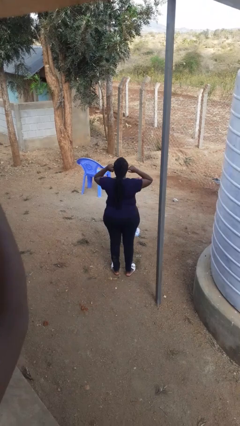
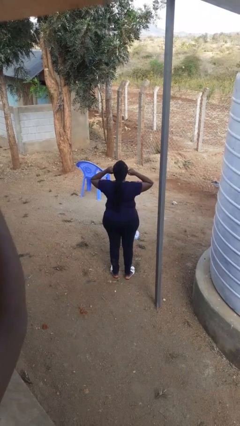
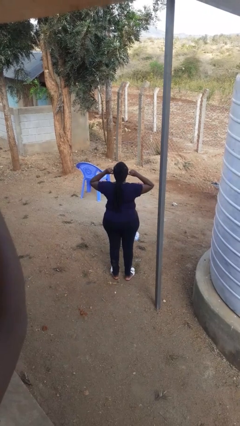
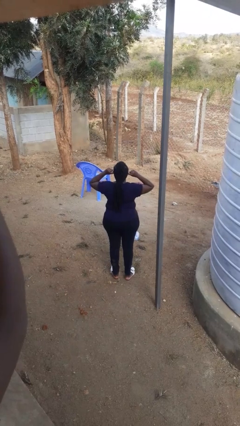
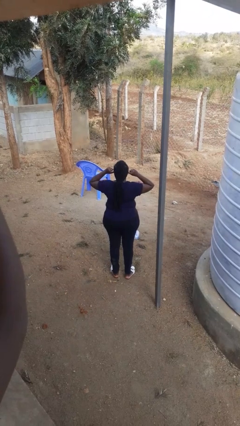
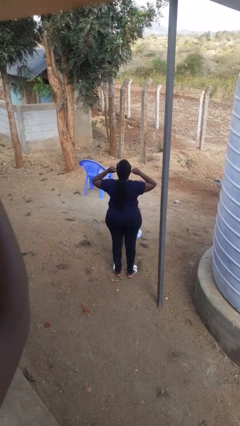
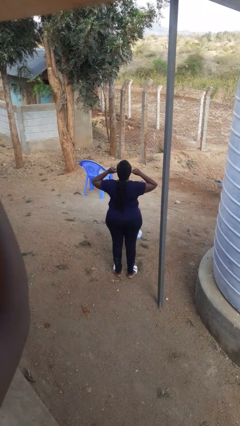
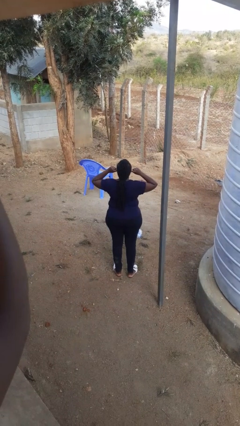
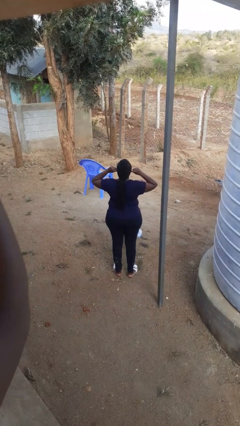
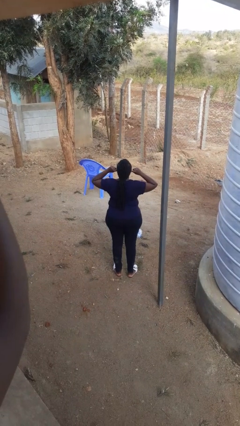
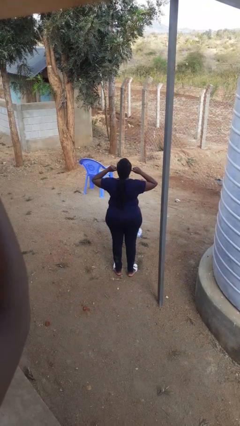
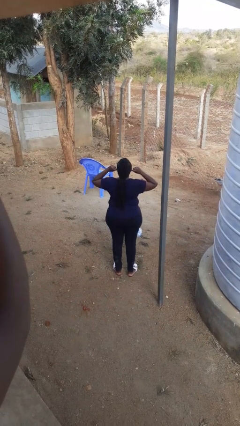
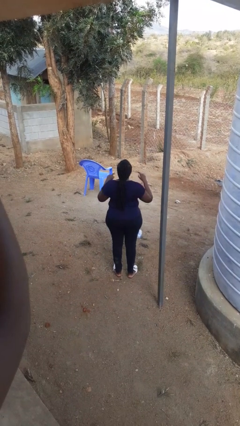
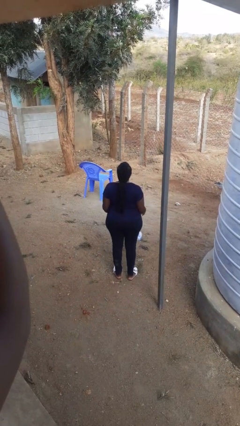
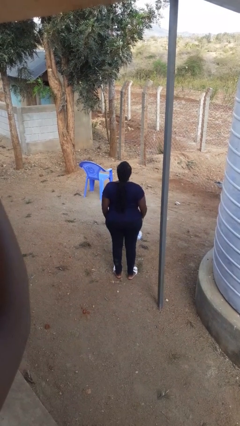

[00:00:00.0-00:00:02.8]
person puts fingers in ear

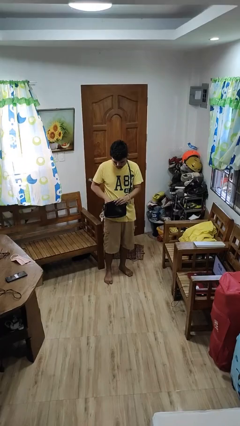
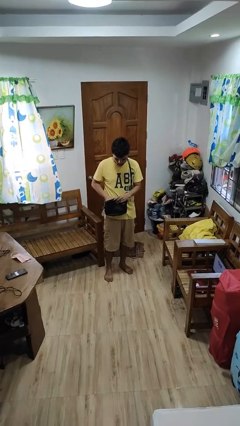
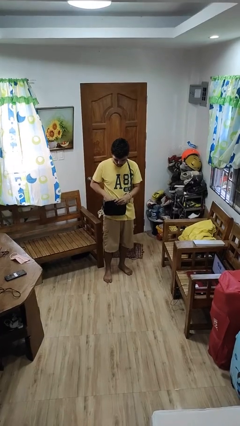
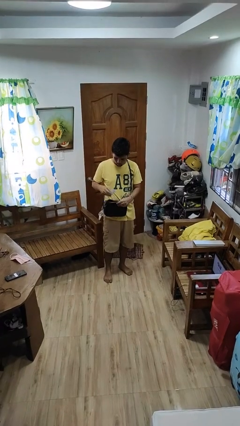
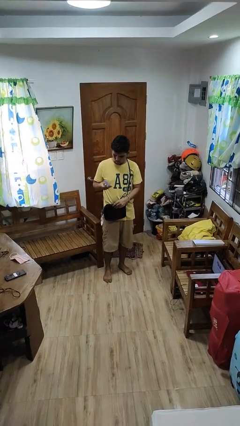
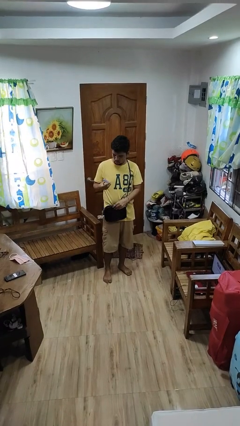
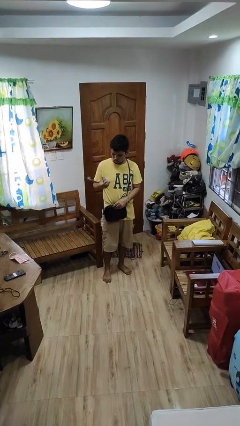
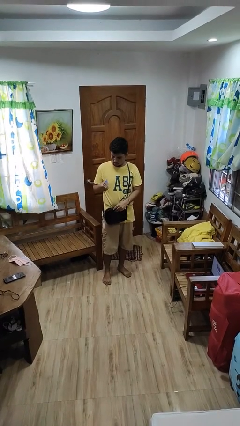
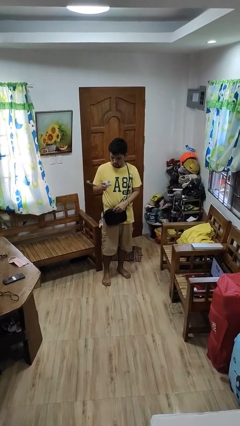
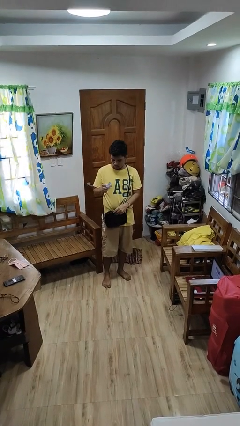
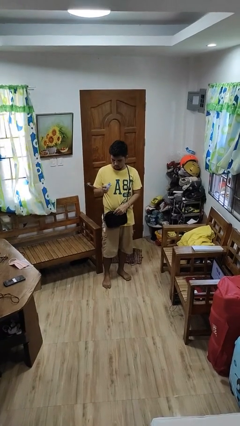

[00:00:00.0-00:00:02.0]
person takes object from purse

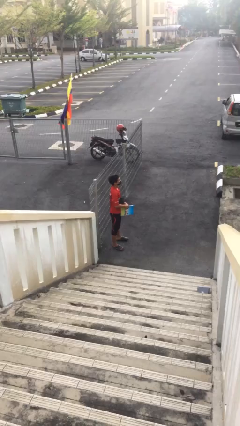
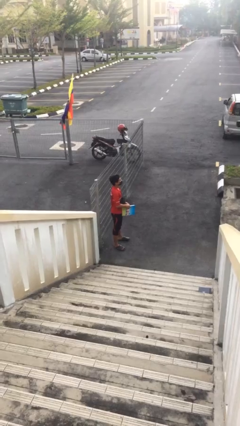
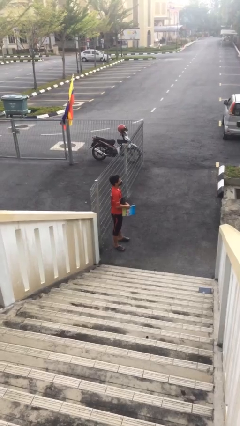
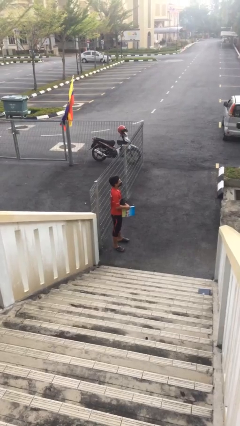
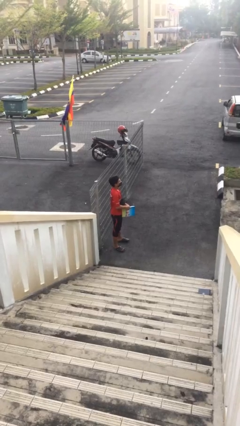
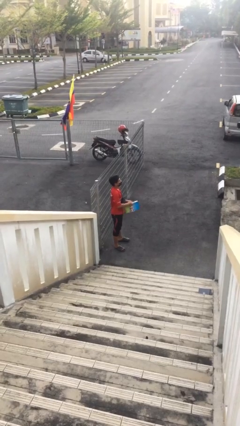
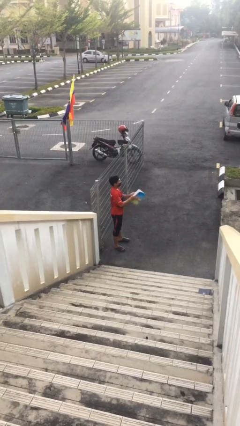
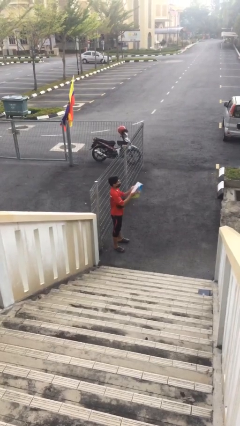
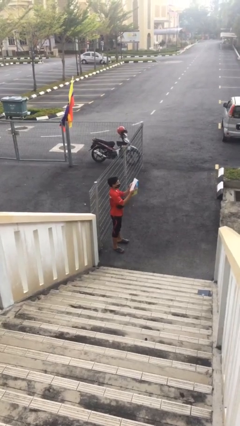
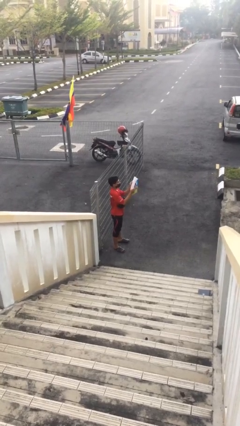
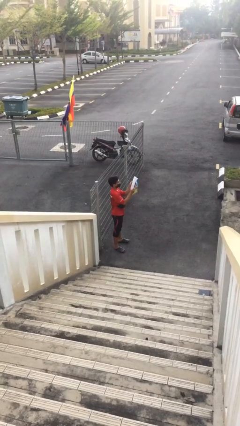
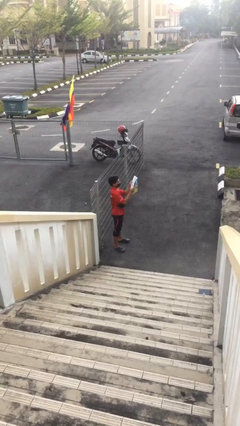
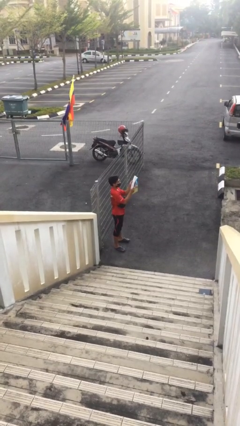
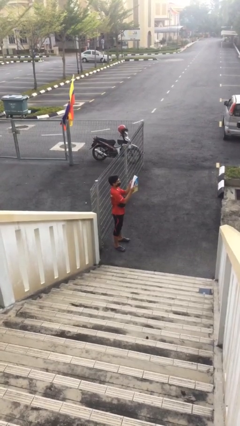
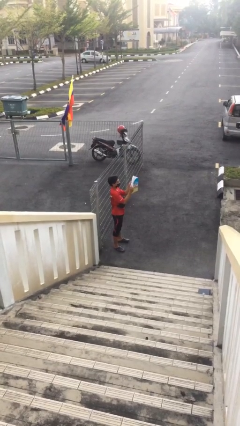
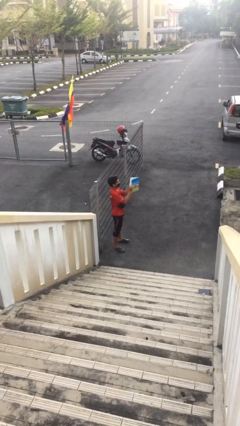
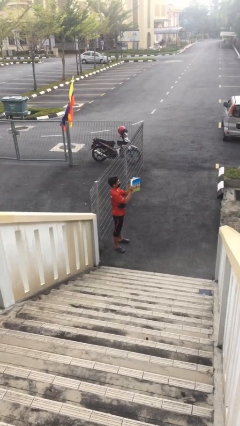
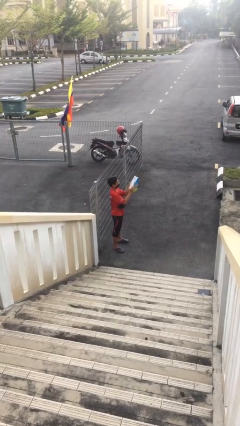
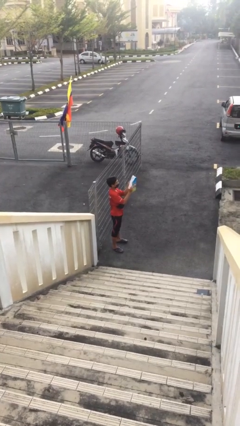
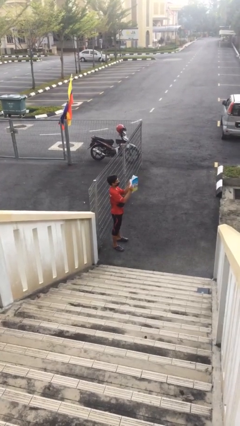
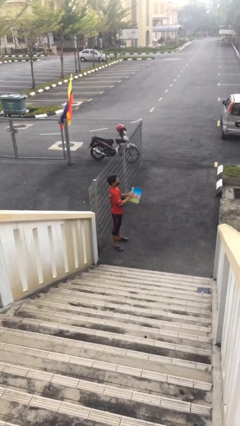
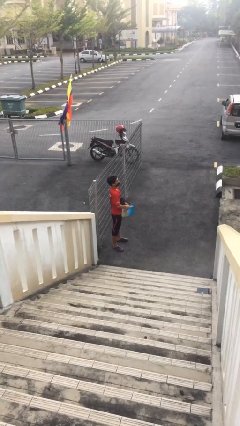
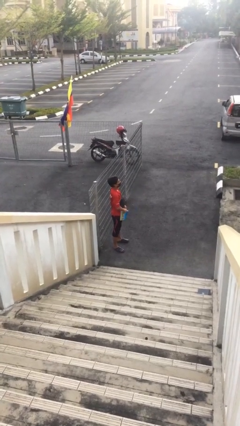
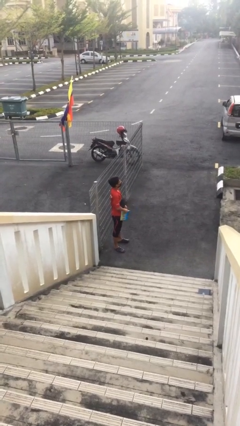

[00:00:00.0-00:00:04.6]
person reads document

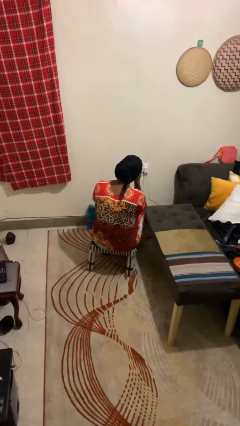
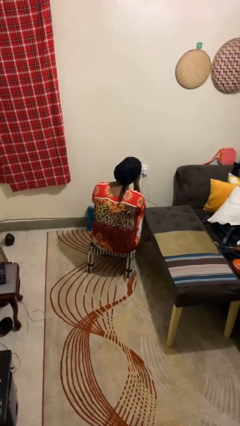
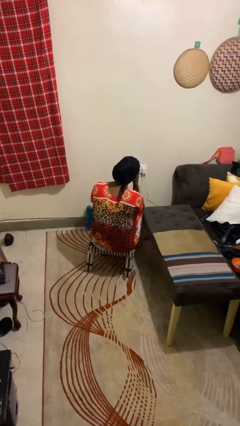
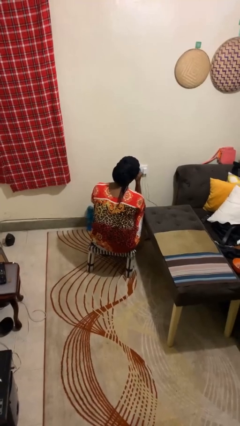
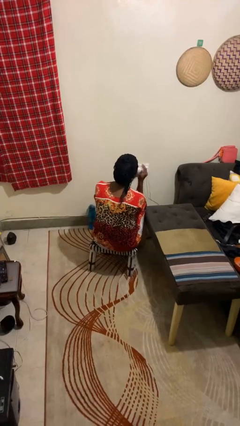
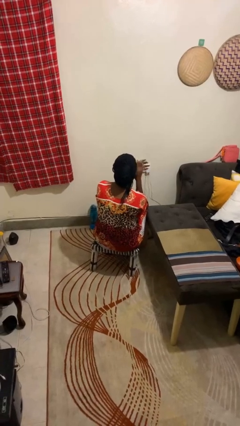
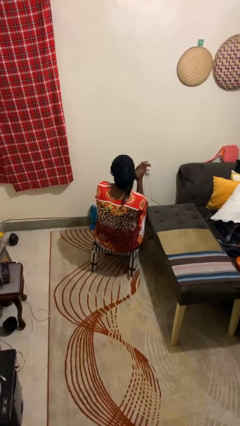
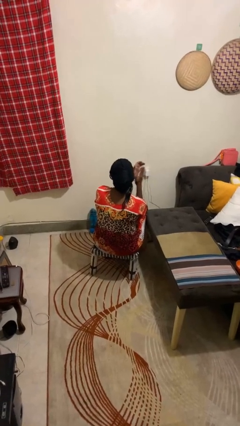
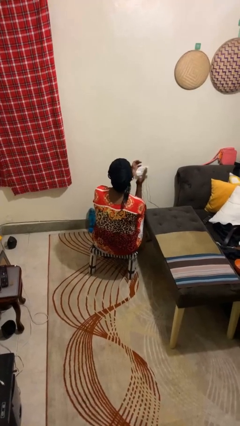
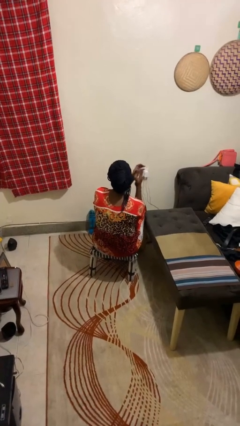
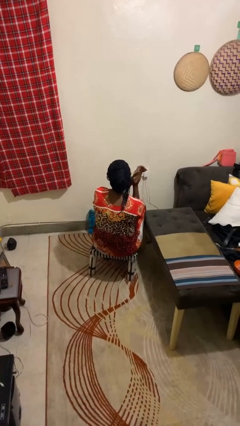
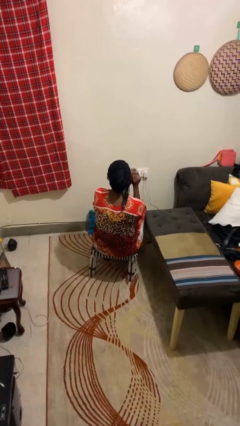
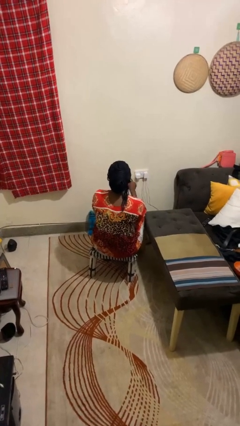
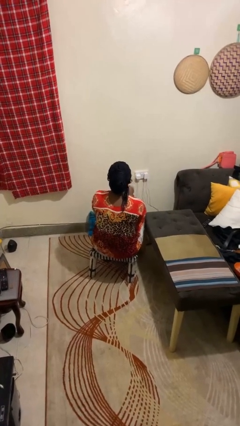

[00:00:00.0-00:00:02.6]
person claps hands

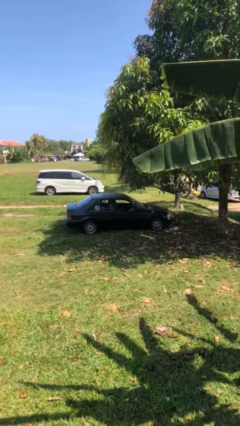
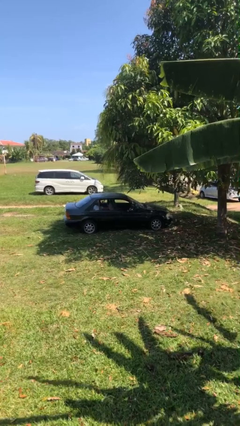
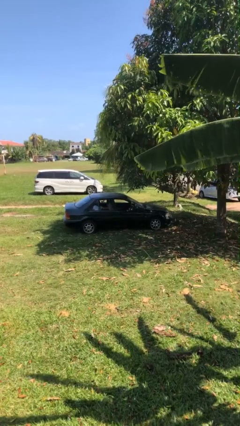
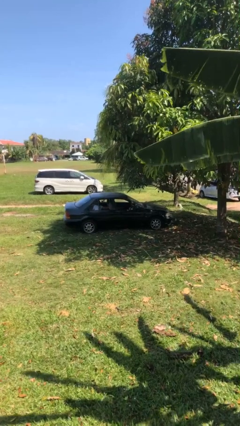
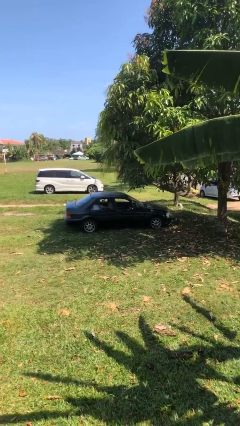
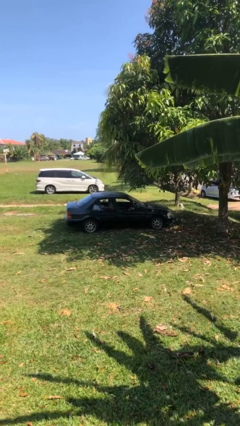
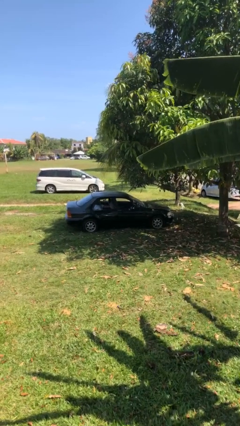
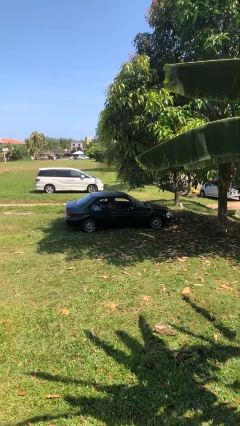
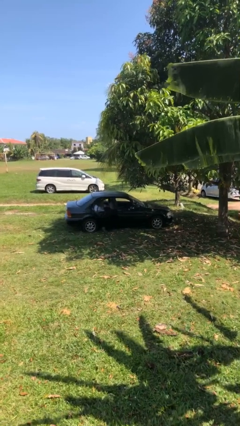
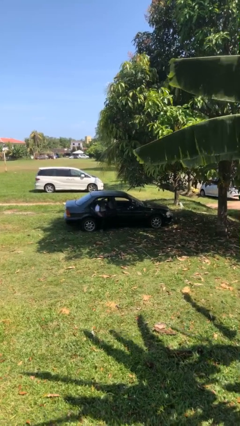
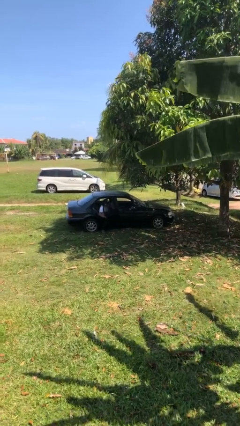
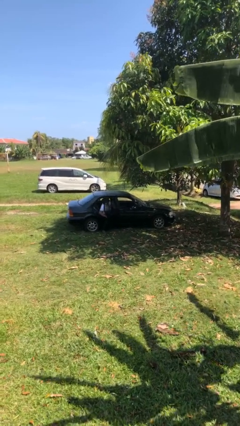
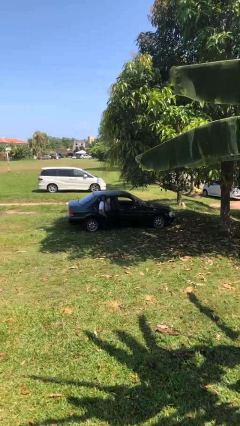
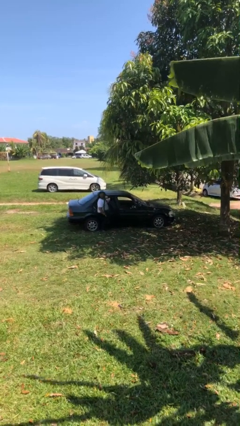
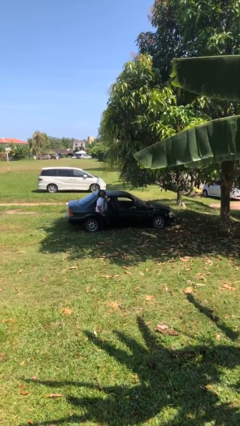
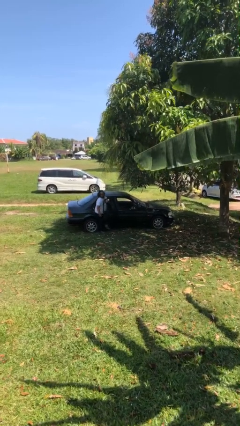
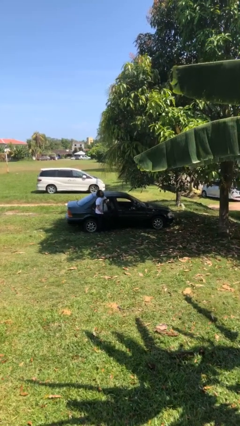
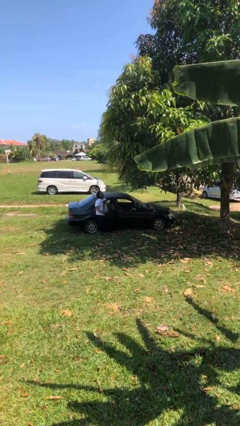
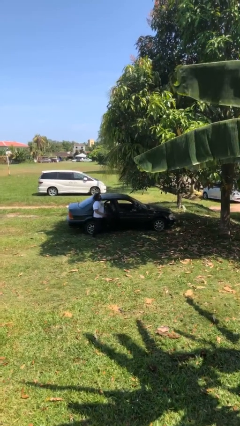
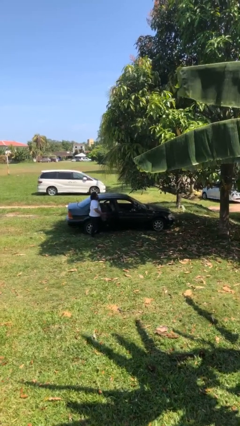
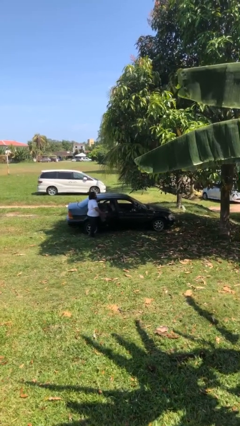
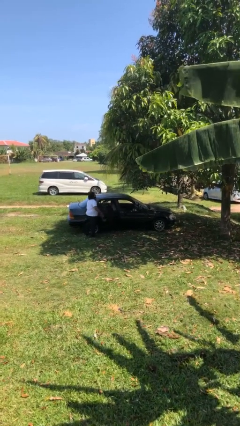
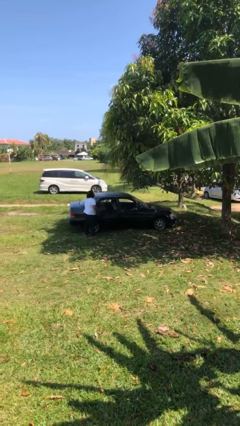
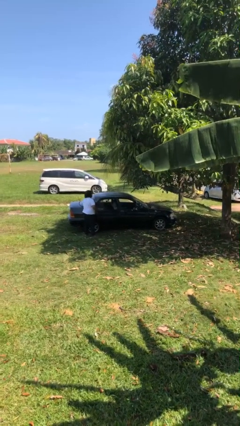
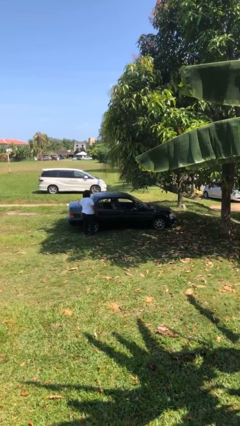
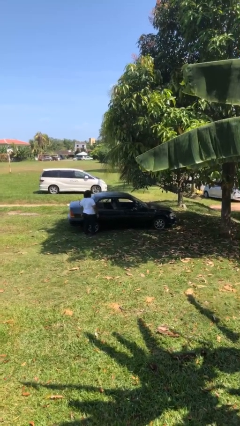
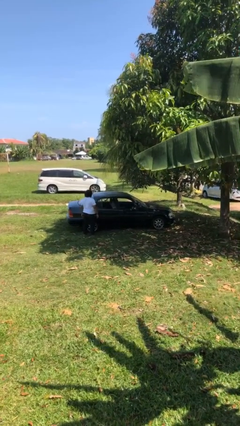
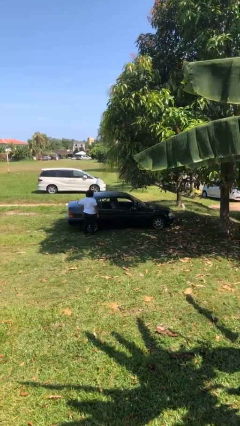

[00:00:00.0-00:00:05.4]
car drops off person
